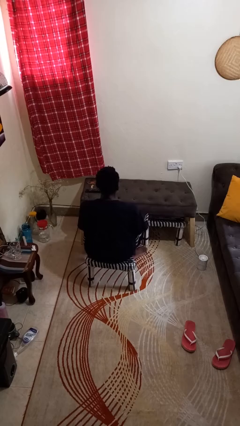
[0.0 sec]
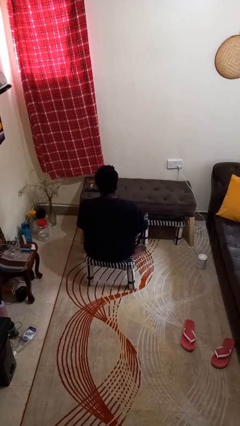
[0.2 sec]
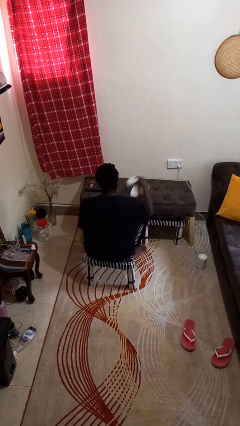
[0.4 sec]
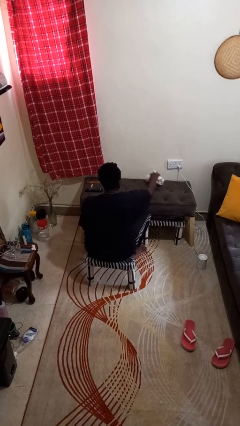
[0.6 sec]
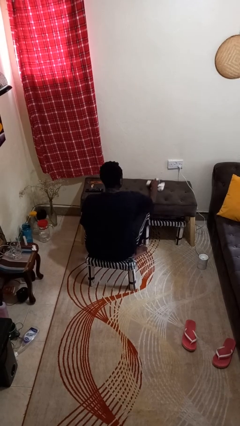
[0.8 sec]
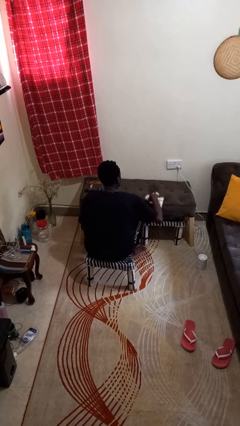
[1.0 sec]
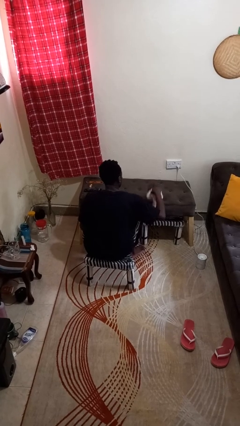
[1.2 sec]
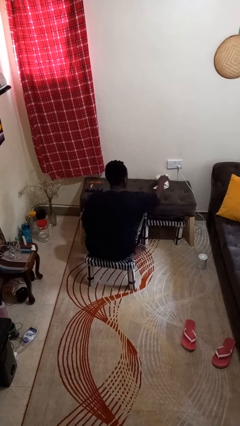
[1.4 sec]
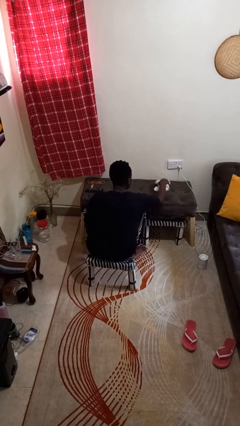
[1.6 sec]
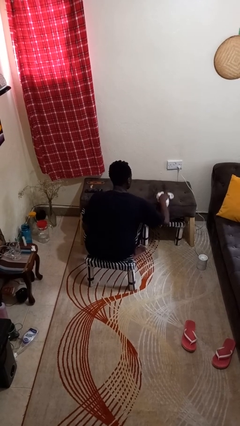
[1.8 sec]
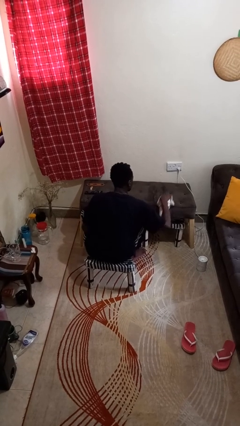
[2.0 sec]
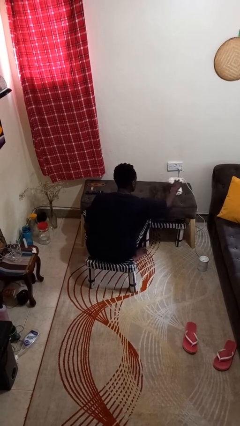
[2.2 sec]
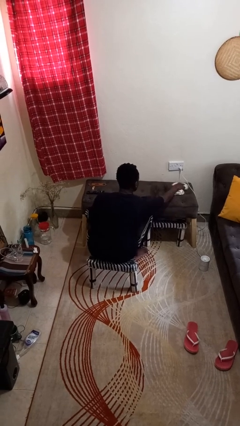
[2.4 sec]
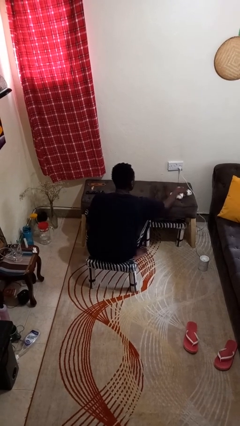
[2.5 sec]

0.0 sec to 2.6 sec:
person cleans table with rag

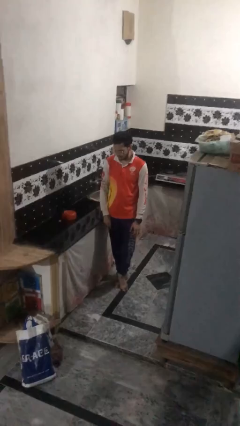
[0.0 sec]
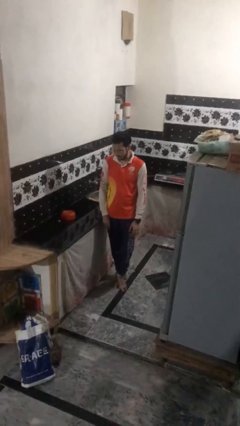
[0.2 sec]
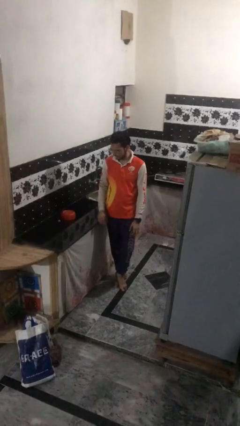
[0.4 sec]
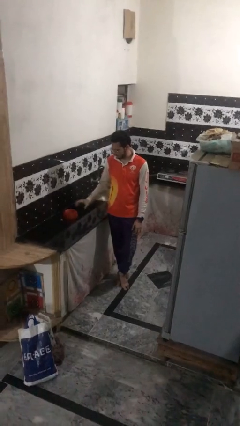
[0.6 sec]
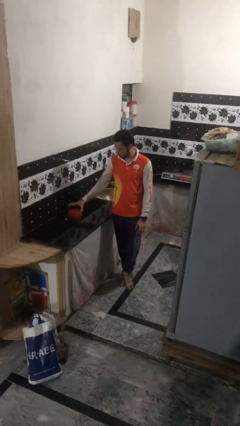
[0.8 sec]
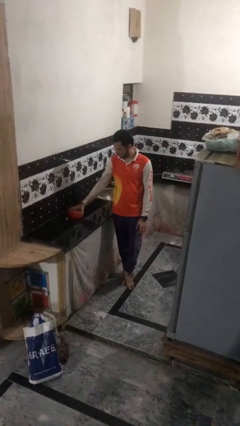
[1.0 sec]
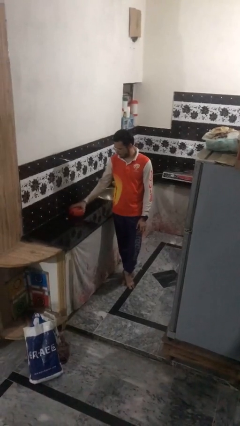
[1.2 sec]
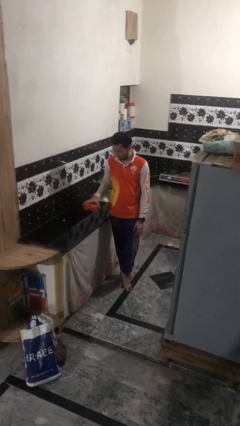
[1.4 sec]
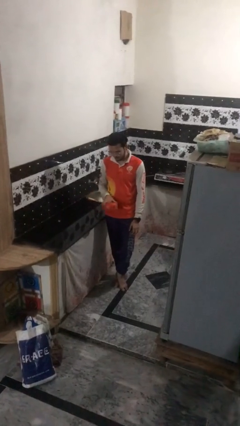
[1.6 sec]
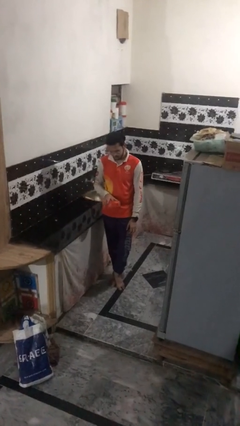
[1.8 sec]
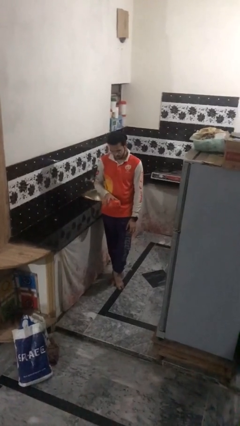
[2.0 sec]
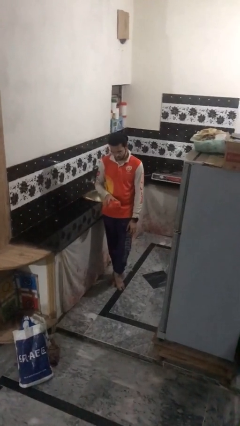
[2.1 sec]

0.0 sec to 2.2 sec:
person picks up object from countertop

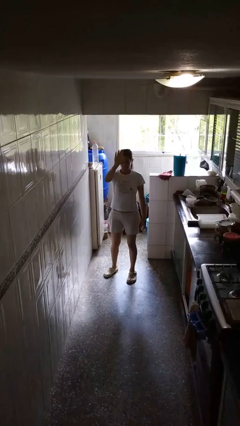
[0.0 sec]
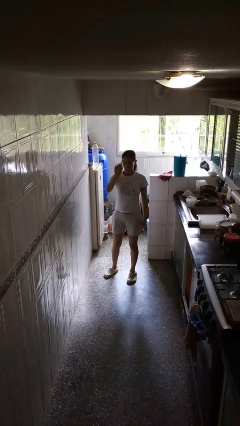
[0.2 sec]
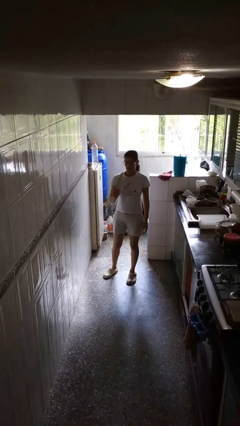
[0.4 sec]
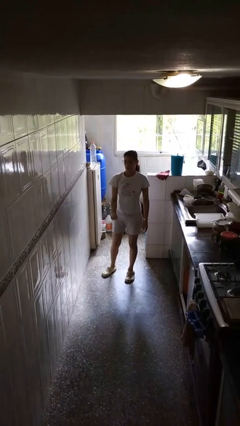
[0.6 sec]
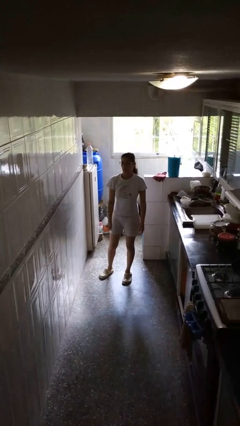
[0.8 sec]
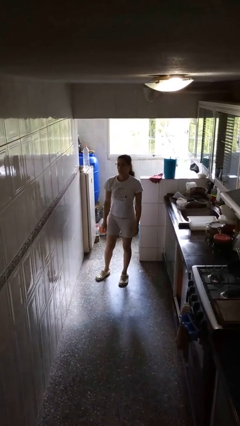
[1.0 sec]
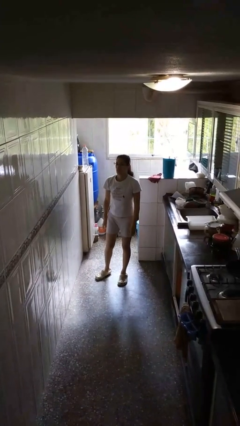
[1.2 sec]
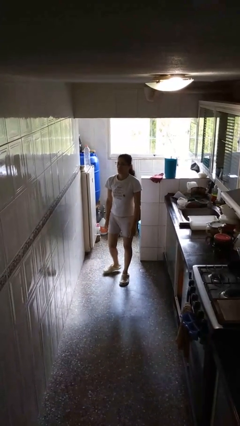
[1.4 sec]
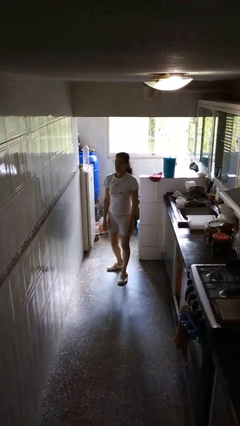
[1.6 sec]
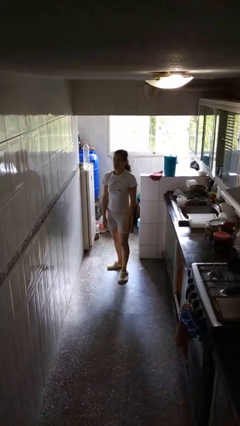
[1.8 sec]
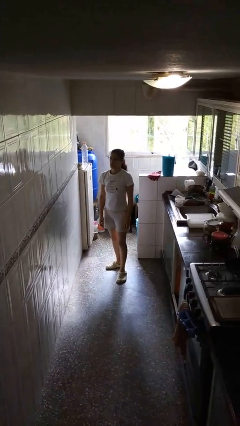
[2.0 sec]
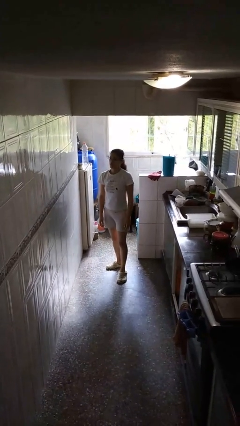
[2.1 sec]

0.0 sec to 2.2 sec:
person gestures lower hand

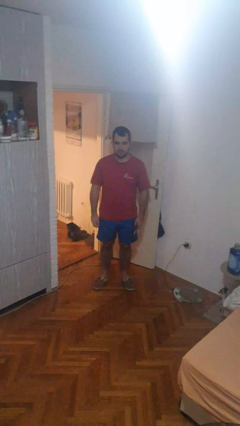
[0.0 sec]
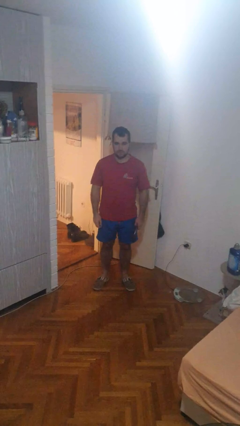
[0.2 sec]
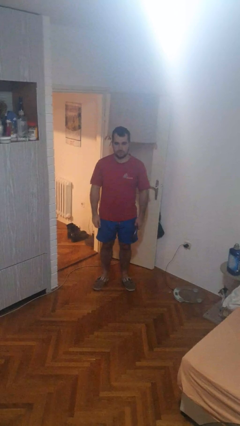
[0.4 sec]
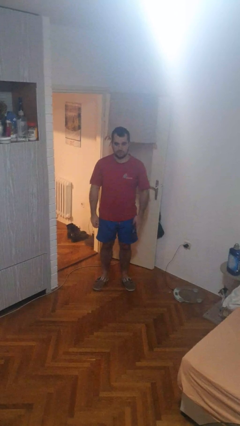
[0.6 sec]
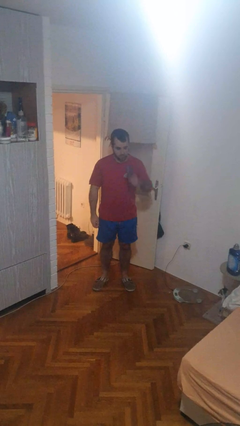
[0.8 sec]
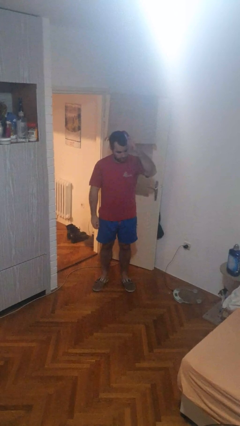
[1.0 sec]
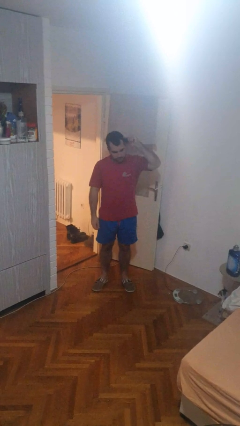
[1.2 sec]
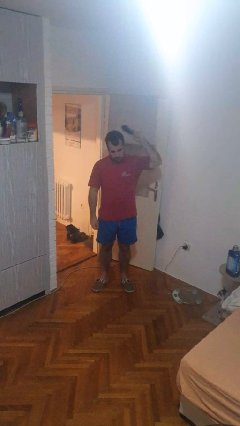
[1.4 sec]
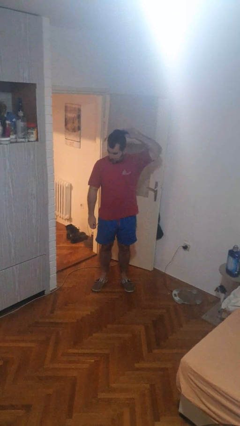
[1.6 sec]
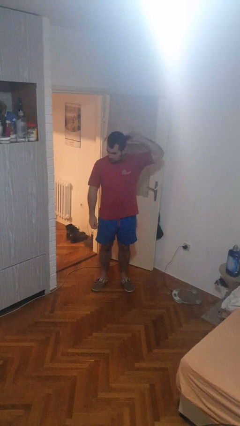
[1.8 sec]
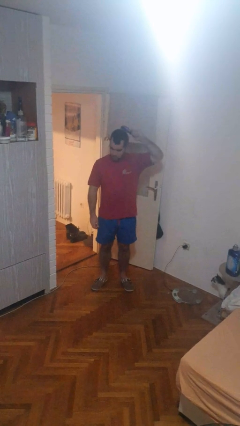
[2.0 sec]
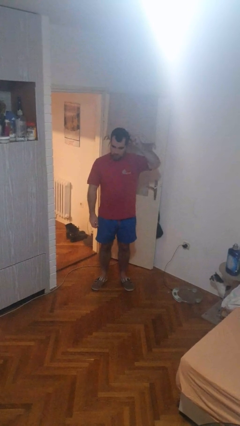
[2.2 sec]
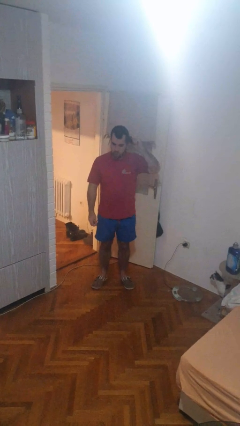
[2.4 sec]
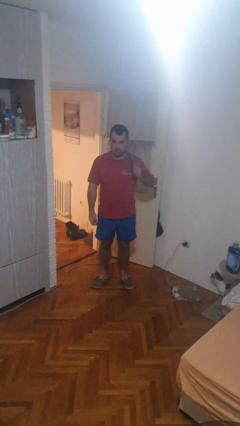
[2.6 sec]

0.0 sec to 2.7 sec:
person brushes hair

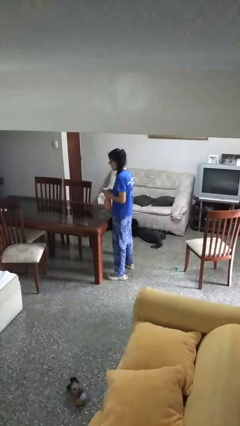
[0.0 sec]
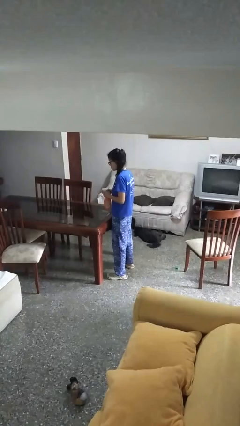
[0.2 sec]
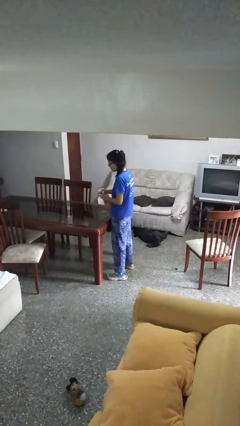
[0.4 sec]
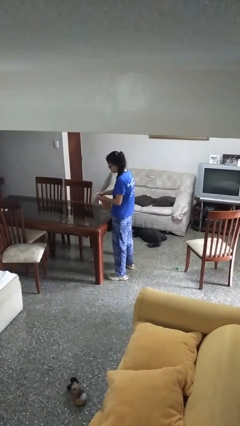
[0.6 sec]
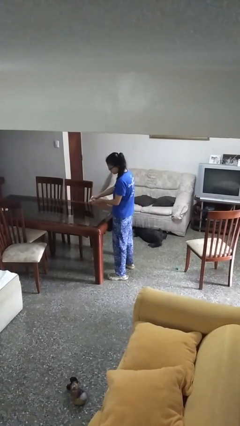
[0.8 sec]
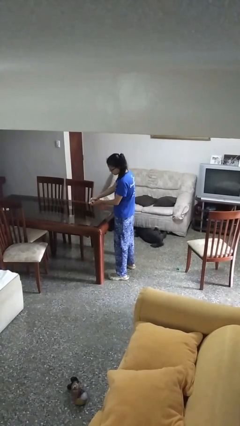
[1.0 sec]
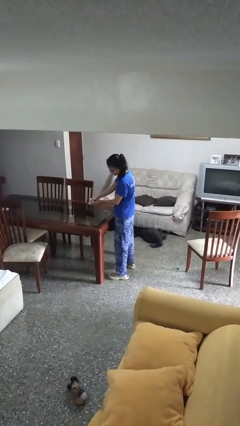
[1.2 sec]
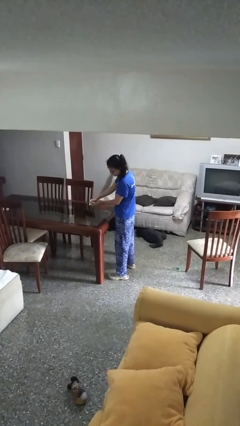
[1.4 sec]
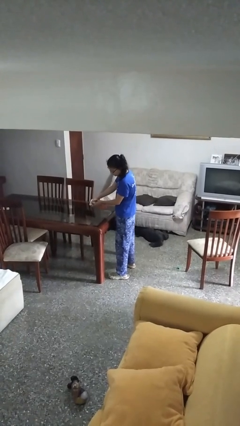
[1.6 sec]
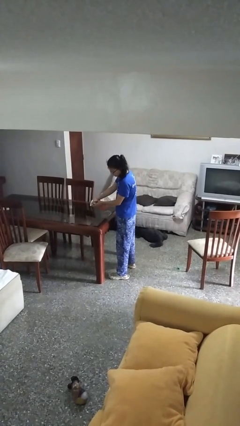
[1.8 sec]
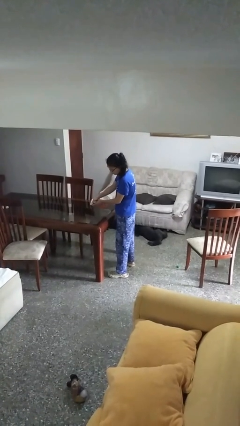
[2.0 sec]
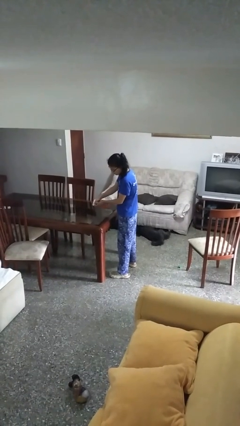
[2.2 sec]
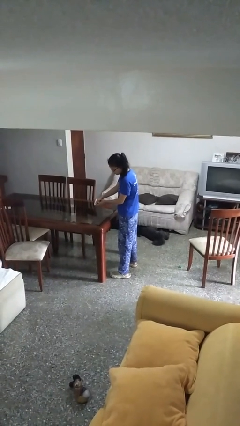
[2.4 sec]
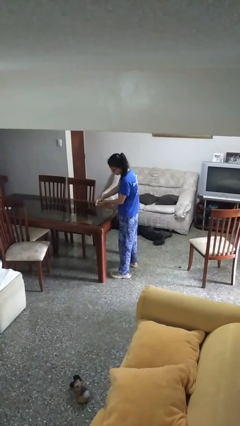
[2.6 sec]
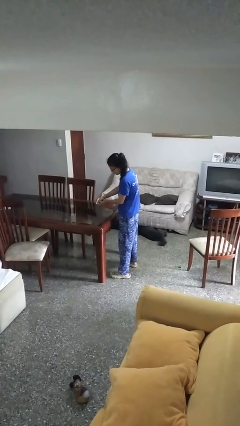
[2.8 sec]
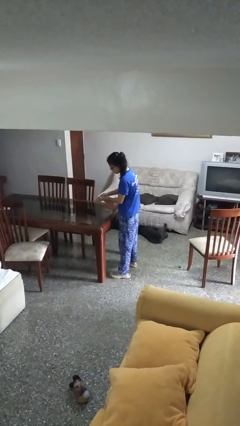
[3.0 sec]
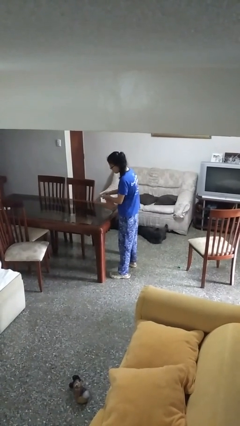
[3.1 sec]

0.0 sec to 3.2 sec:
person sprays from bottle

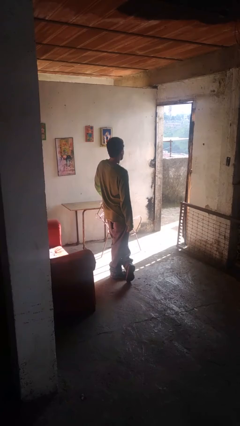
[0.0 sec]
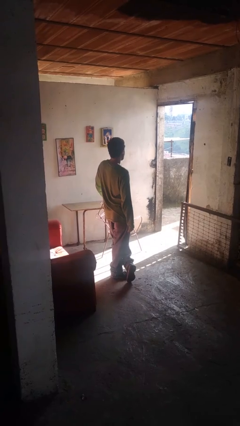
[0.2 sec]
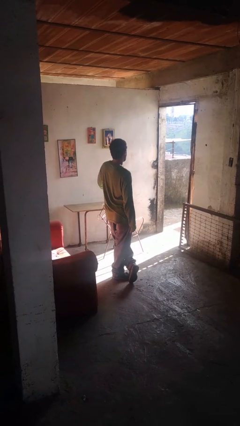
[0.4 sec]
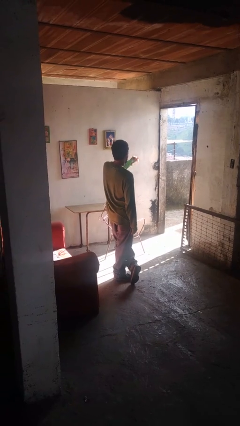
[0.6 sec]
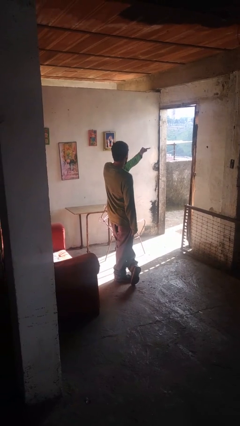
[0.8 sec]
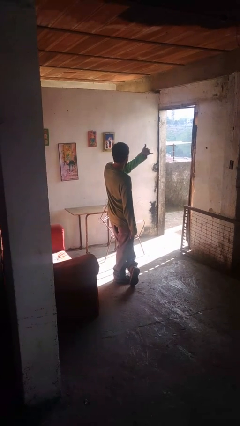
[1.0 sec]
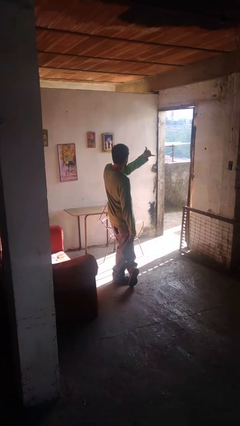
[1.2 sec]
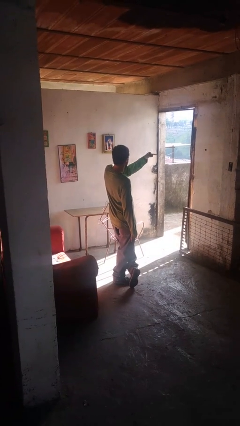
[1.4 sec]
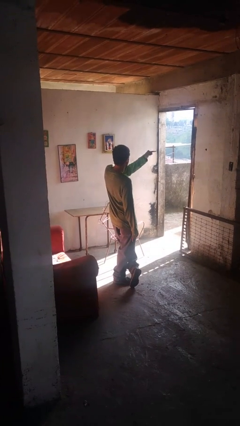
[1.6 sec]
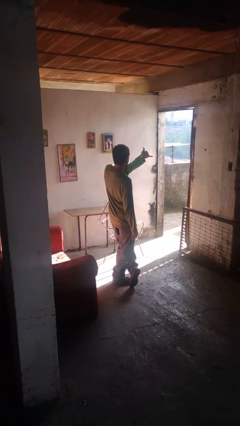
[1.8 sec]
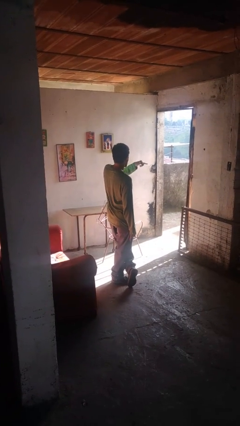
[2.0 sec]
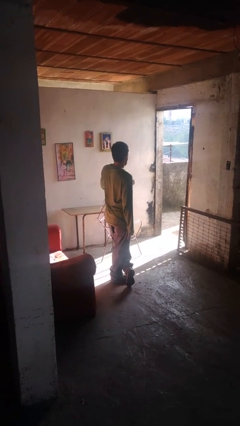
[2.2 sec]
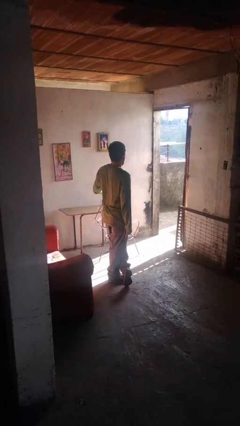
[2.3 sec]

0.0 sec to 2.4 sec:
person gestures hang loose

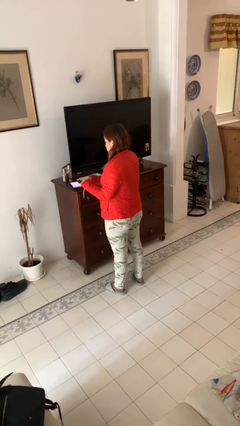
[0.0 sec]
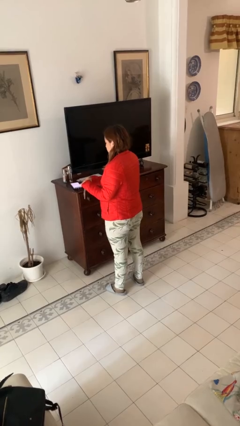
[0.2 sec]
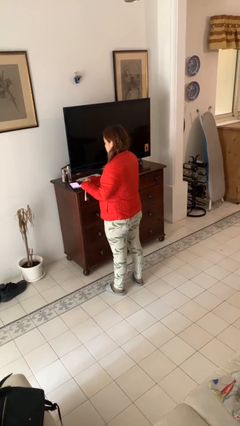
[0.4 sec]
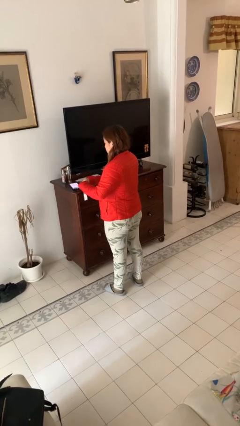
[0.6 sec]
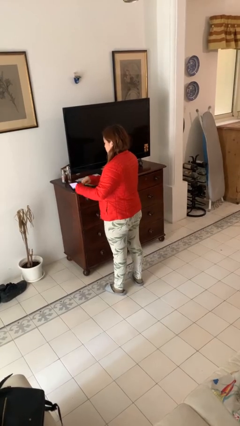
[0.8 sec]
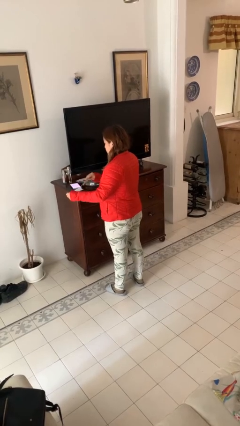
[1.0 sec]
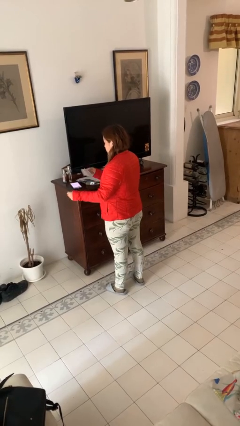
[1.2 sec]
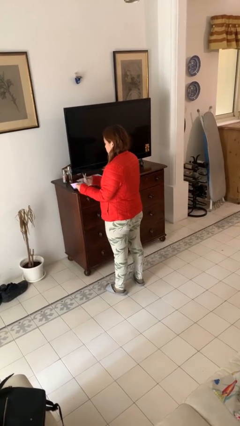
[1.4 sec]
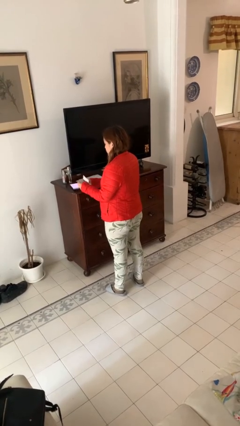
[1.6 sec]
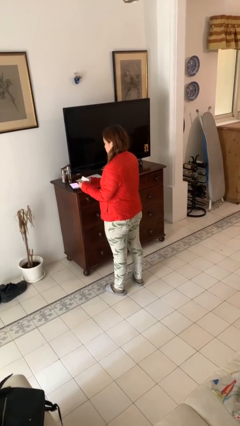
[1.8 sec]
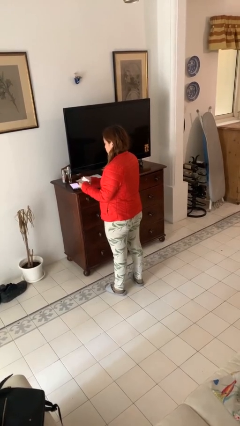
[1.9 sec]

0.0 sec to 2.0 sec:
person tears paper
